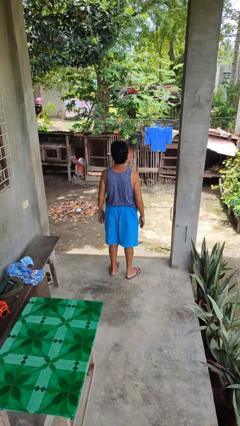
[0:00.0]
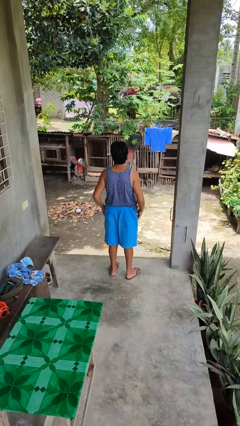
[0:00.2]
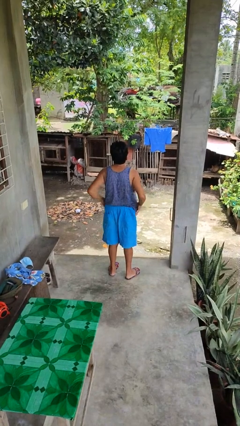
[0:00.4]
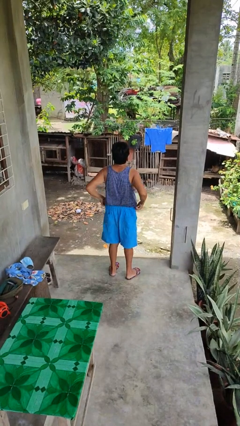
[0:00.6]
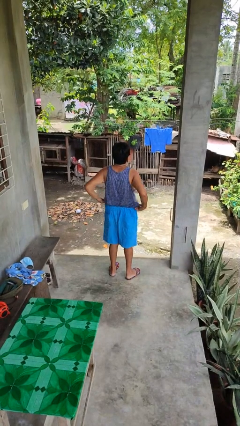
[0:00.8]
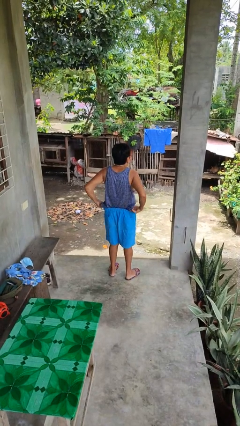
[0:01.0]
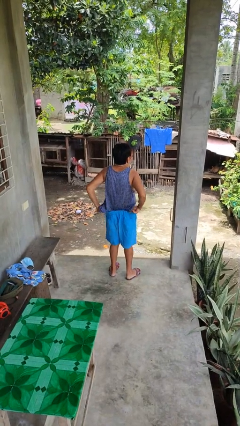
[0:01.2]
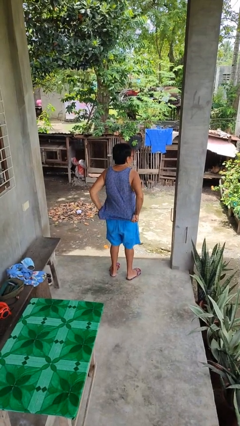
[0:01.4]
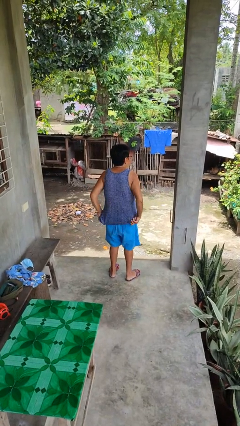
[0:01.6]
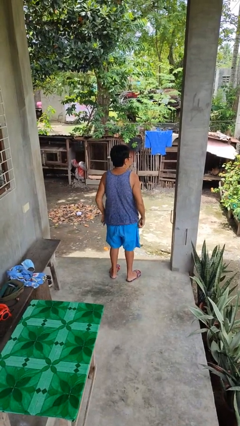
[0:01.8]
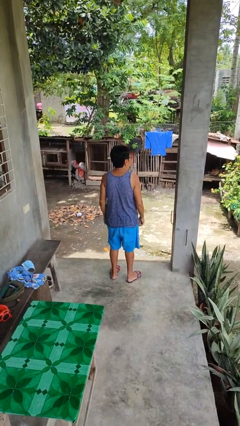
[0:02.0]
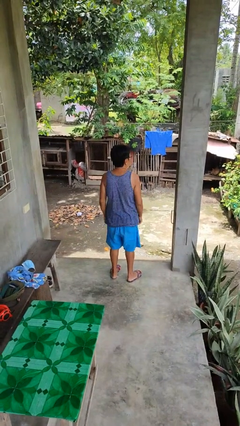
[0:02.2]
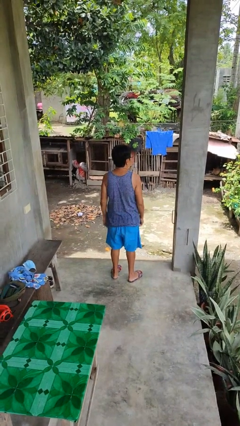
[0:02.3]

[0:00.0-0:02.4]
person untucks shirt

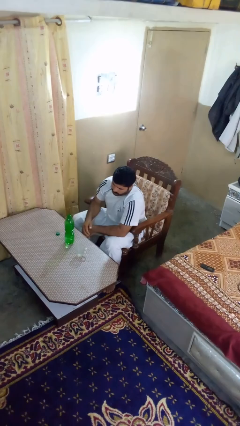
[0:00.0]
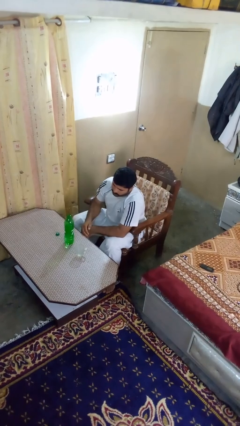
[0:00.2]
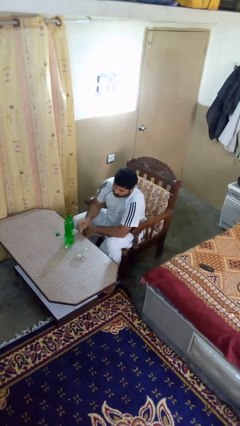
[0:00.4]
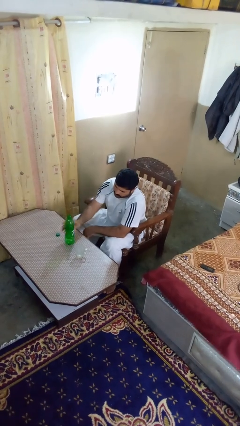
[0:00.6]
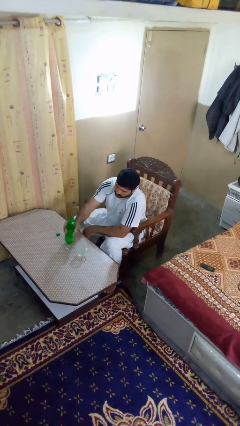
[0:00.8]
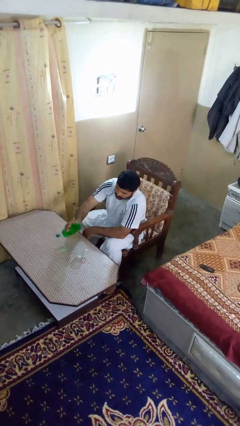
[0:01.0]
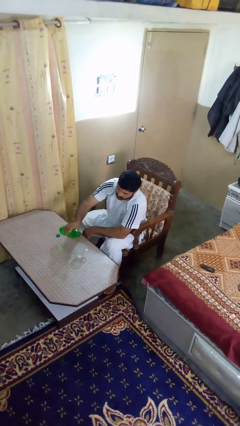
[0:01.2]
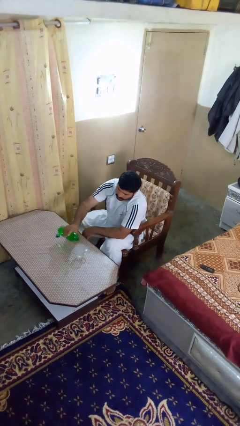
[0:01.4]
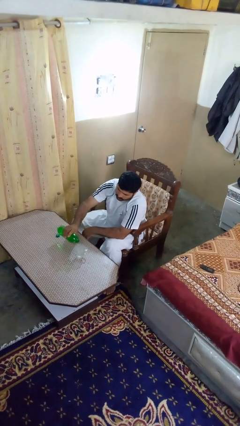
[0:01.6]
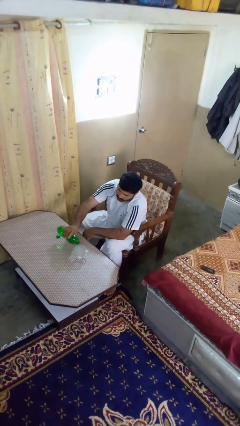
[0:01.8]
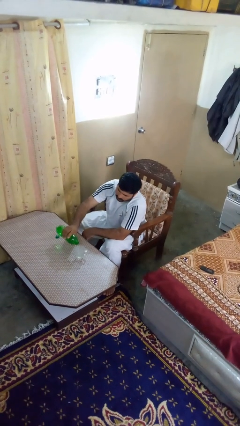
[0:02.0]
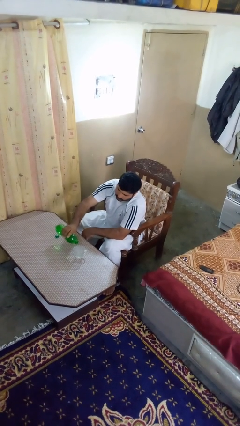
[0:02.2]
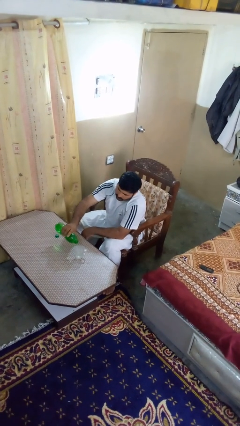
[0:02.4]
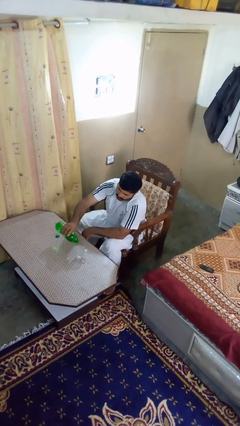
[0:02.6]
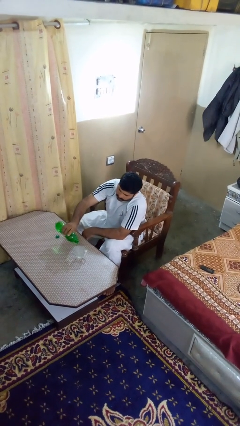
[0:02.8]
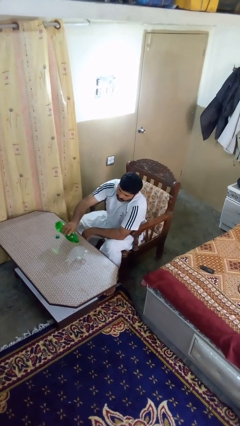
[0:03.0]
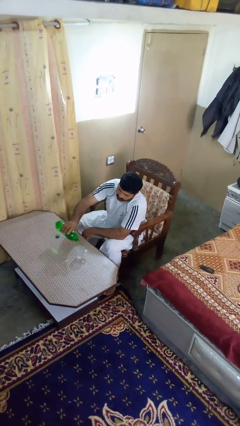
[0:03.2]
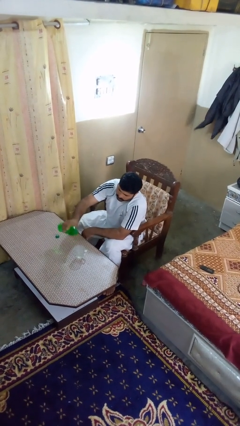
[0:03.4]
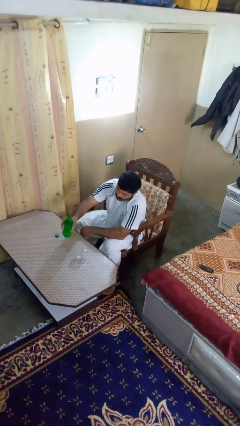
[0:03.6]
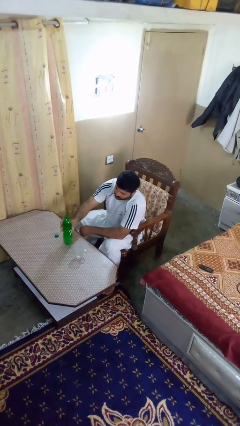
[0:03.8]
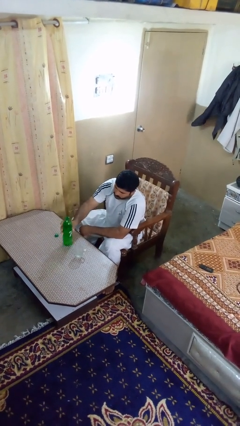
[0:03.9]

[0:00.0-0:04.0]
person pours liquid into cup

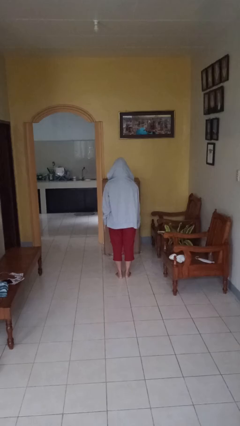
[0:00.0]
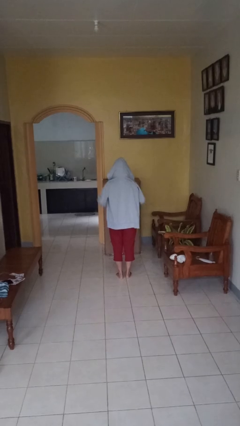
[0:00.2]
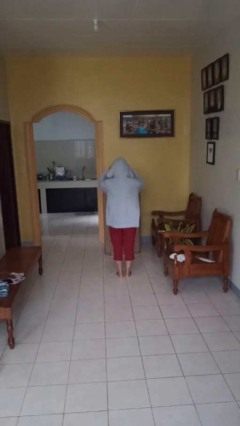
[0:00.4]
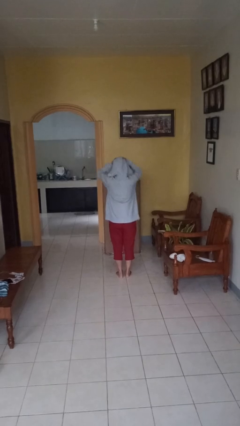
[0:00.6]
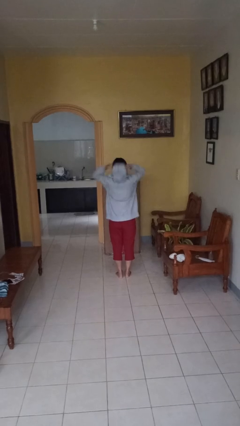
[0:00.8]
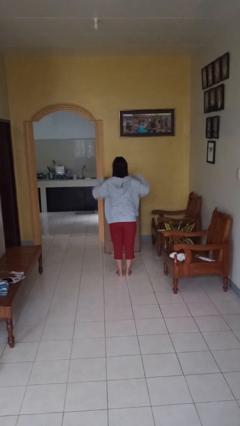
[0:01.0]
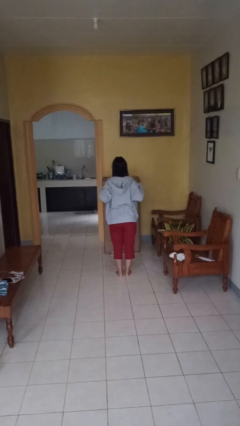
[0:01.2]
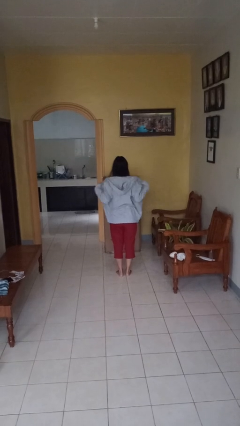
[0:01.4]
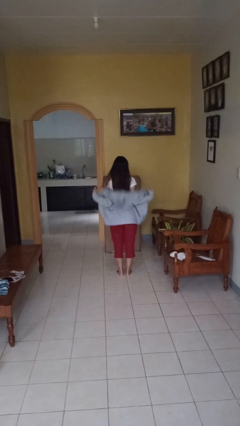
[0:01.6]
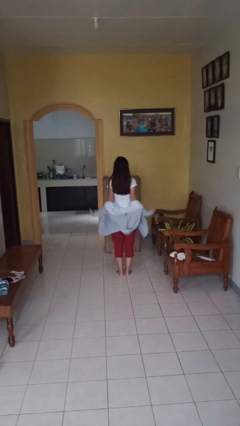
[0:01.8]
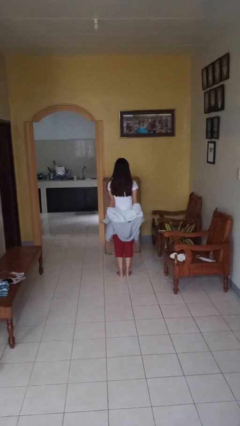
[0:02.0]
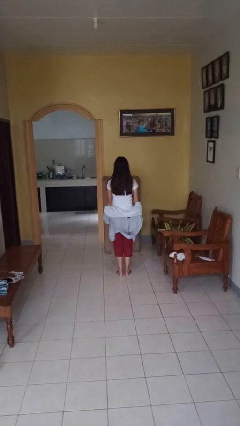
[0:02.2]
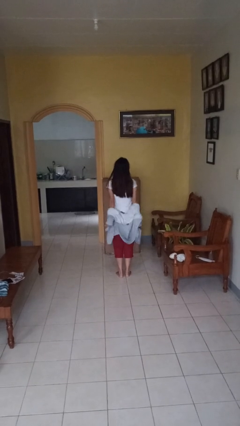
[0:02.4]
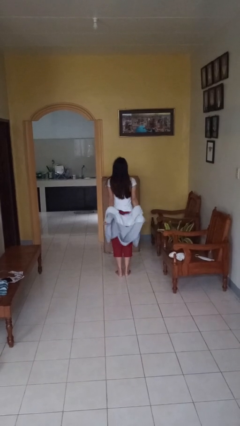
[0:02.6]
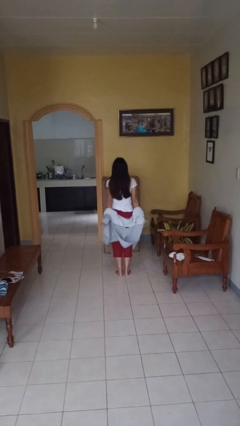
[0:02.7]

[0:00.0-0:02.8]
person takes off hoodie

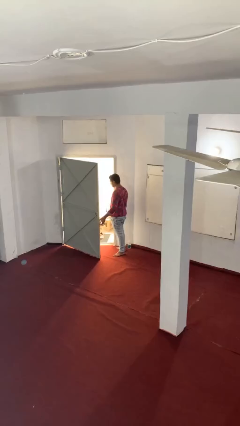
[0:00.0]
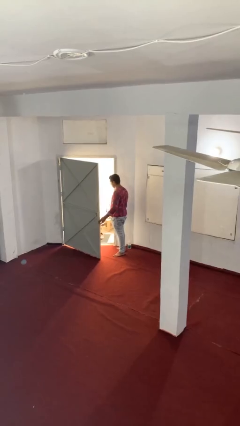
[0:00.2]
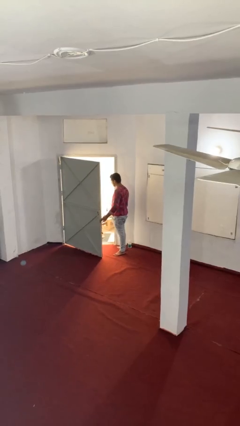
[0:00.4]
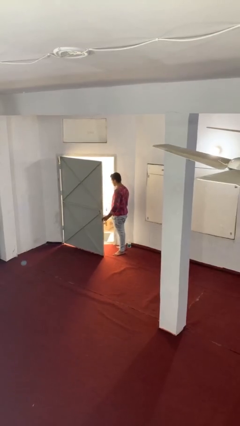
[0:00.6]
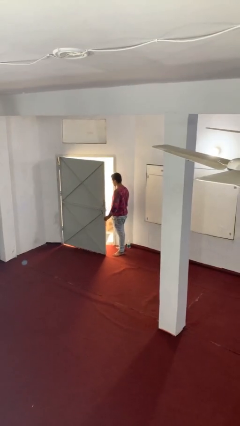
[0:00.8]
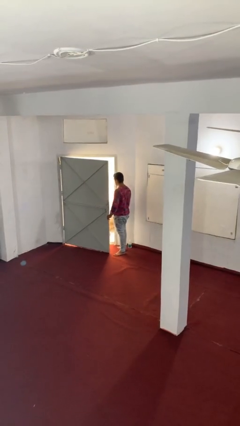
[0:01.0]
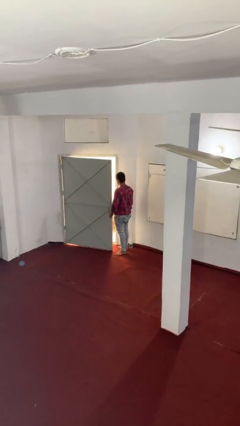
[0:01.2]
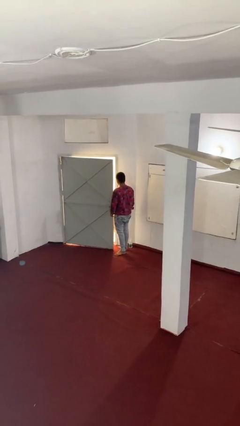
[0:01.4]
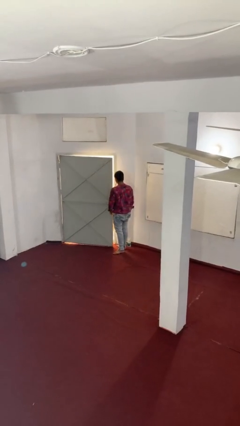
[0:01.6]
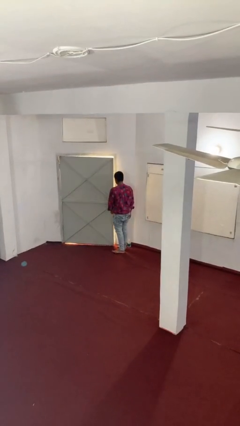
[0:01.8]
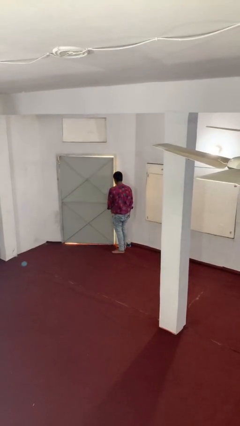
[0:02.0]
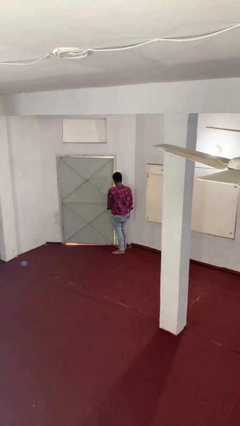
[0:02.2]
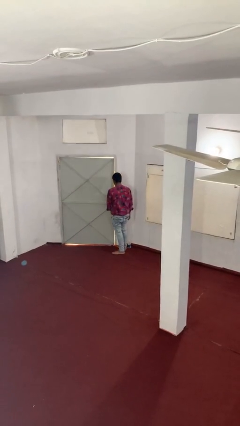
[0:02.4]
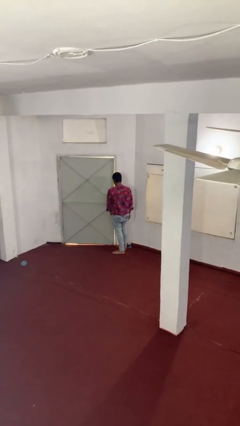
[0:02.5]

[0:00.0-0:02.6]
person closes facility door

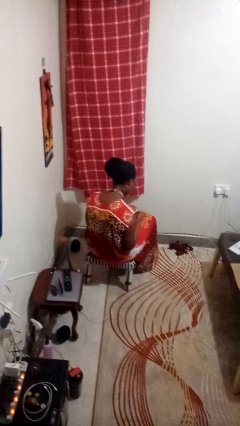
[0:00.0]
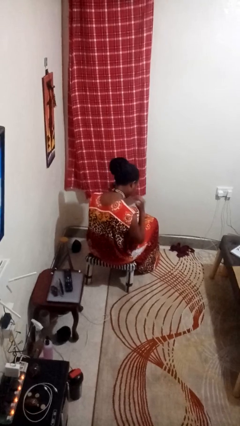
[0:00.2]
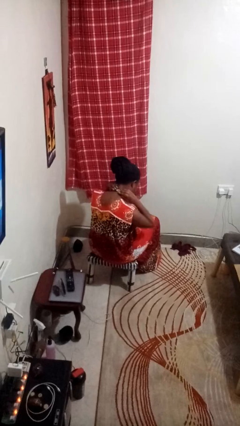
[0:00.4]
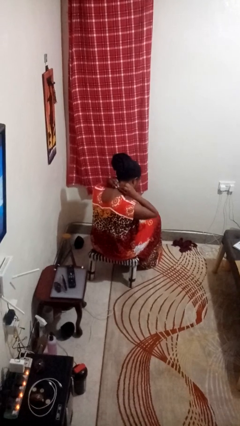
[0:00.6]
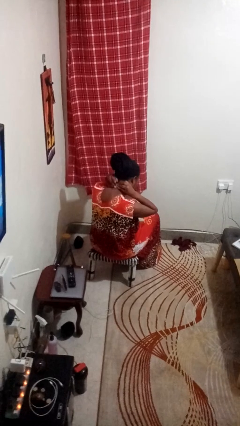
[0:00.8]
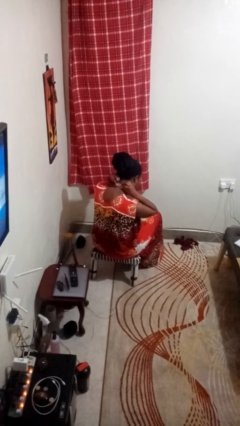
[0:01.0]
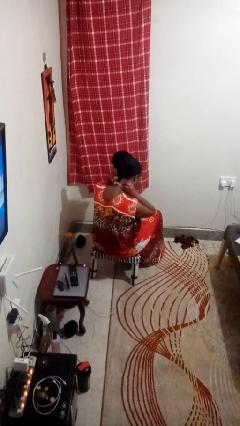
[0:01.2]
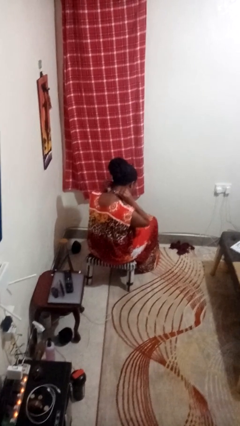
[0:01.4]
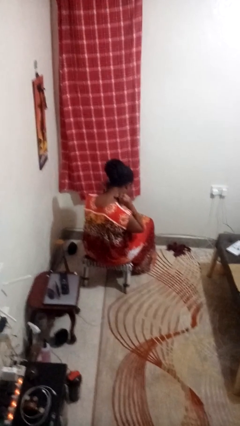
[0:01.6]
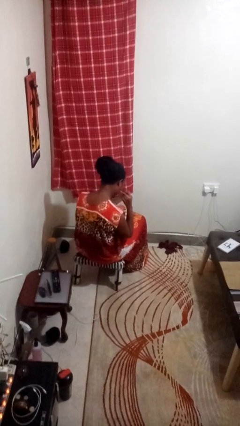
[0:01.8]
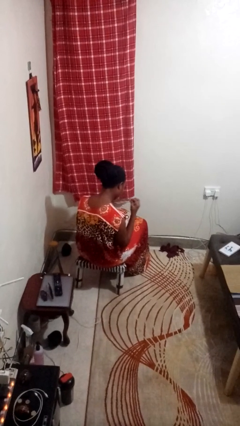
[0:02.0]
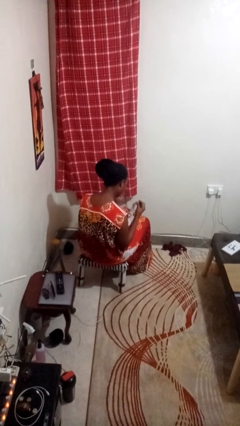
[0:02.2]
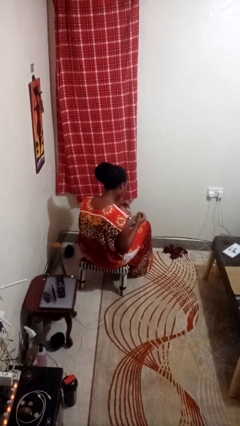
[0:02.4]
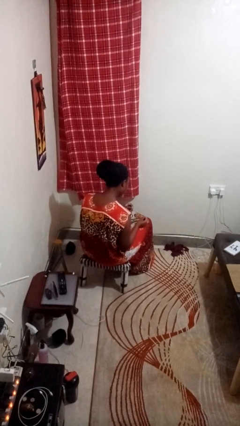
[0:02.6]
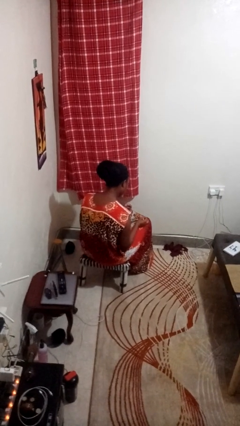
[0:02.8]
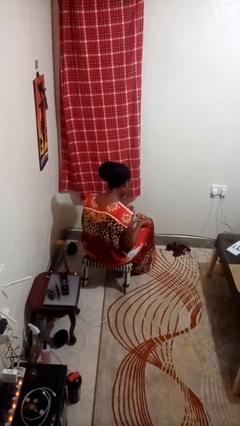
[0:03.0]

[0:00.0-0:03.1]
person takes off necklace

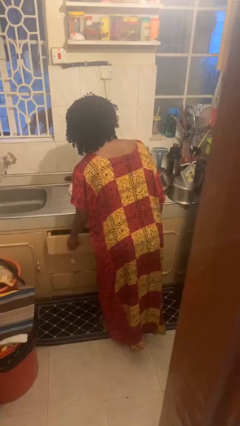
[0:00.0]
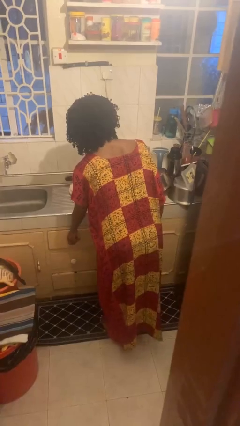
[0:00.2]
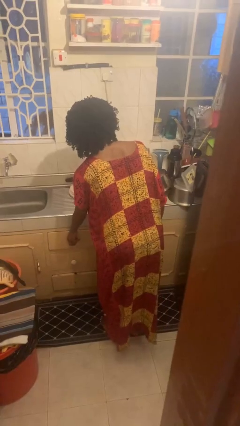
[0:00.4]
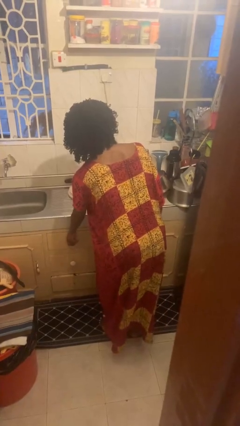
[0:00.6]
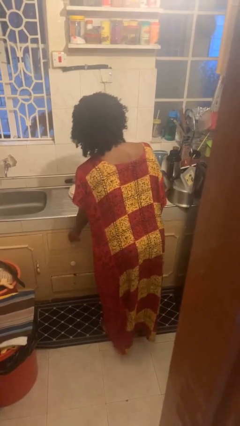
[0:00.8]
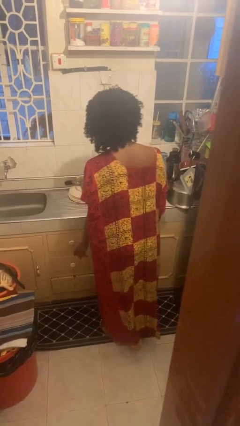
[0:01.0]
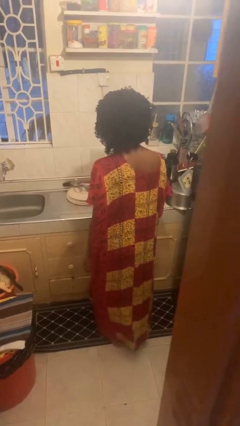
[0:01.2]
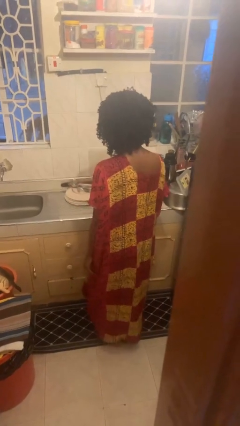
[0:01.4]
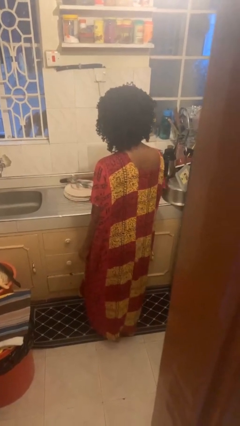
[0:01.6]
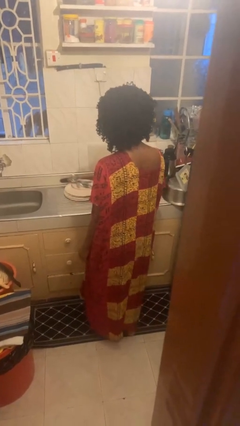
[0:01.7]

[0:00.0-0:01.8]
person closes kitchen drawer

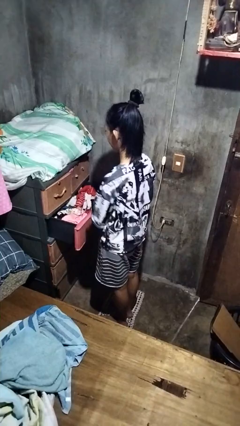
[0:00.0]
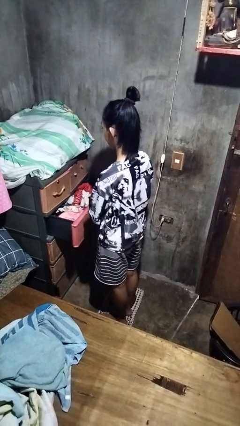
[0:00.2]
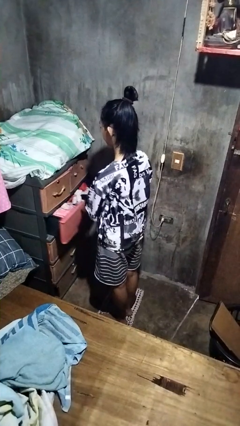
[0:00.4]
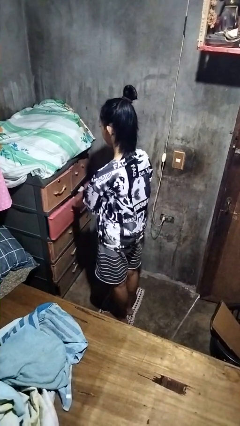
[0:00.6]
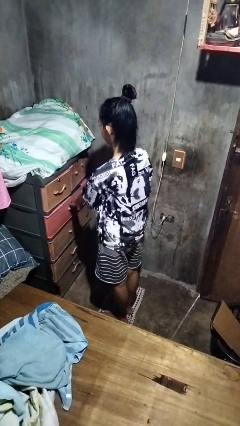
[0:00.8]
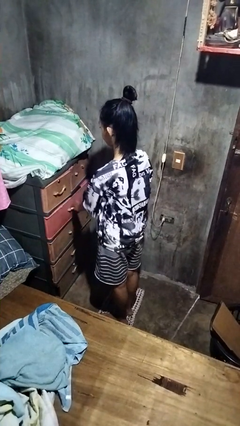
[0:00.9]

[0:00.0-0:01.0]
person closes dresser drawer
